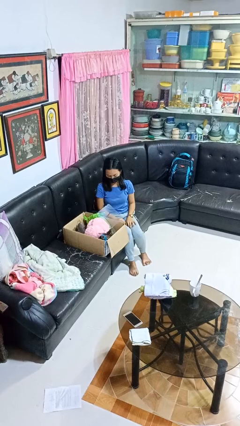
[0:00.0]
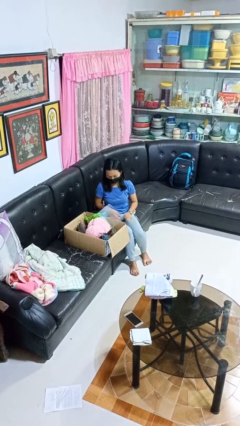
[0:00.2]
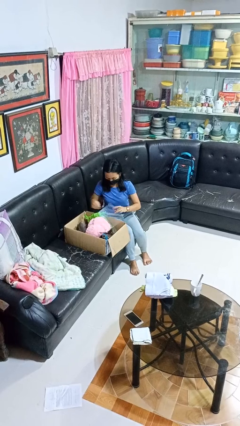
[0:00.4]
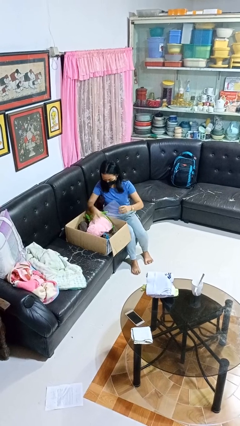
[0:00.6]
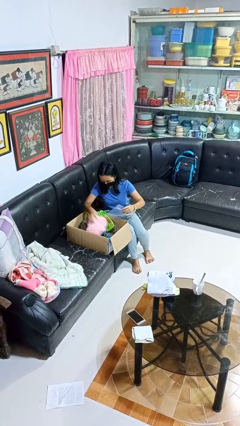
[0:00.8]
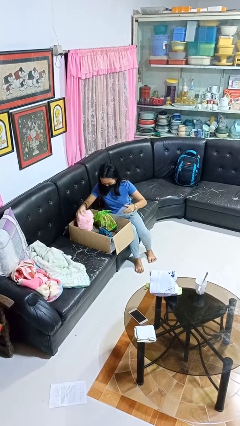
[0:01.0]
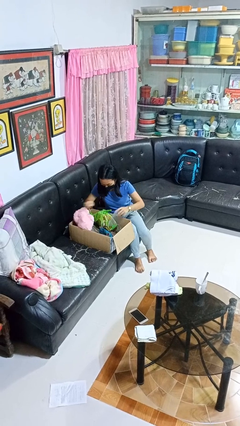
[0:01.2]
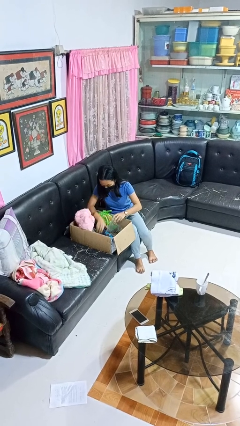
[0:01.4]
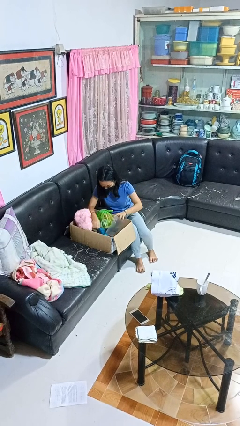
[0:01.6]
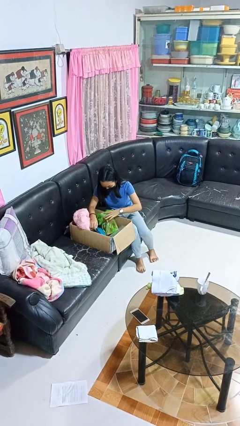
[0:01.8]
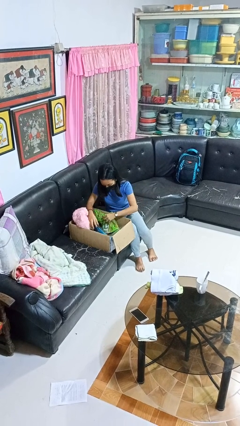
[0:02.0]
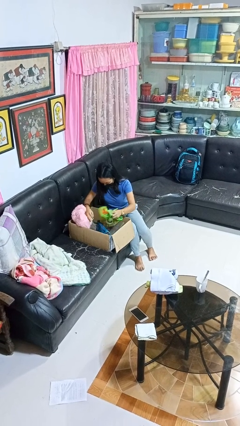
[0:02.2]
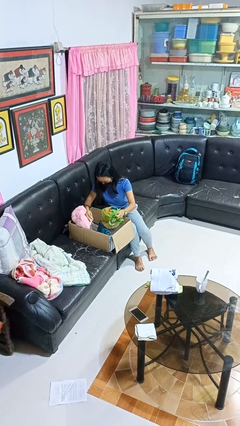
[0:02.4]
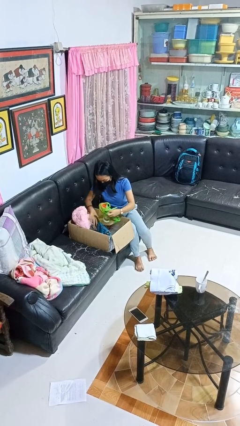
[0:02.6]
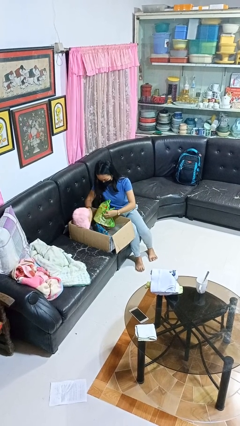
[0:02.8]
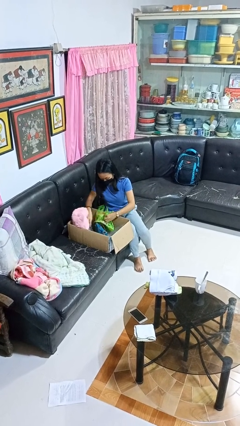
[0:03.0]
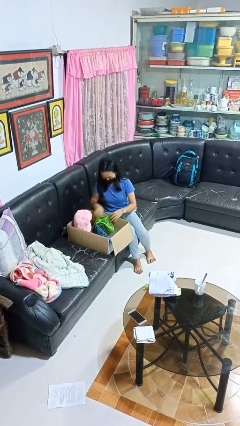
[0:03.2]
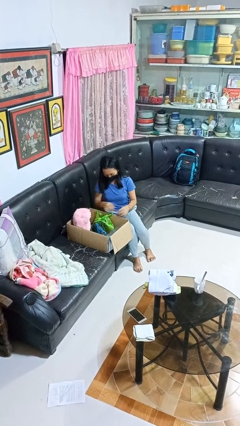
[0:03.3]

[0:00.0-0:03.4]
person searches in box

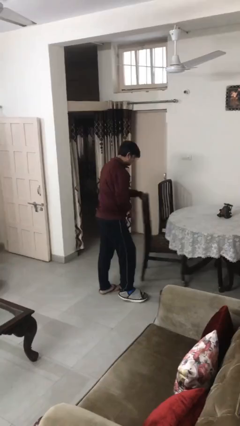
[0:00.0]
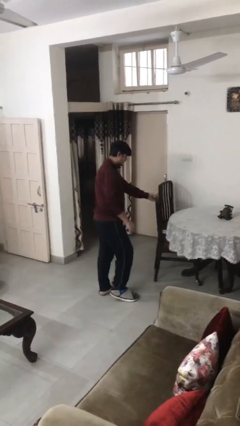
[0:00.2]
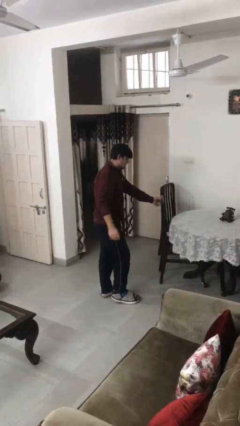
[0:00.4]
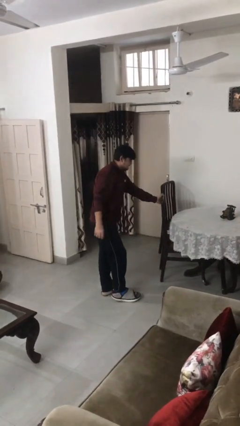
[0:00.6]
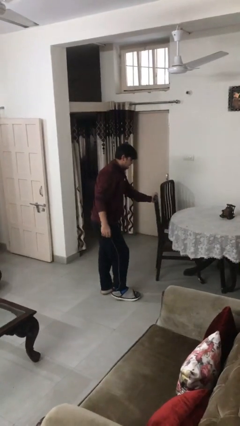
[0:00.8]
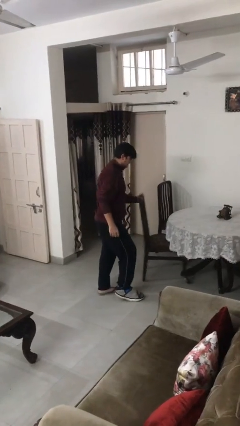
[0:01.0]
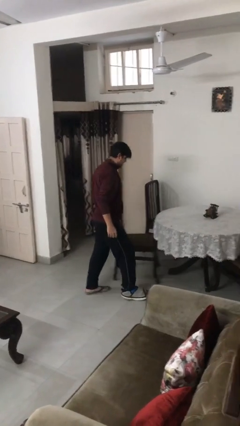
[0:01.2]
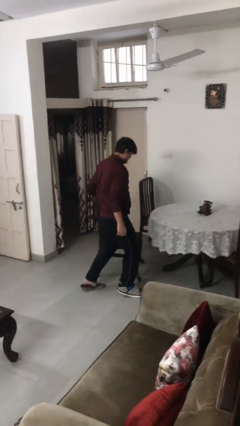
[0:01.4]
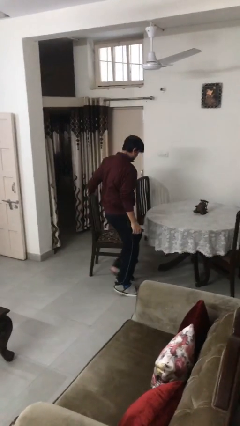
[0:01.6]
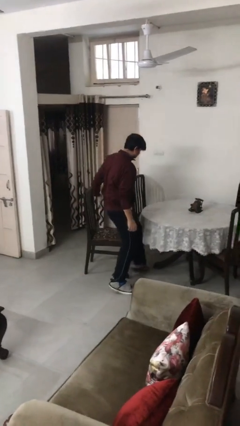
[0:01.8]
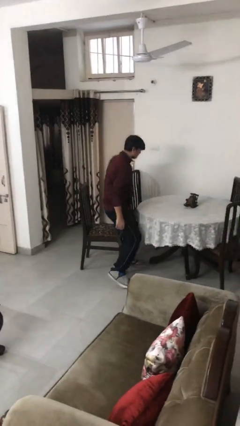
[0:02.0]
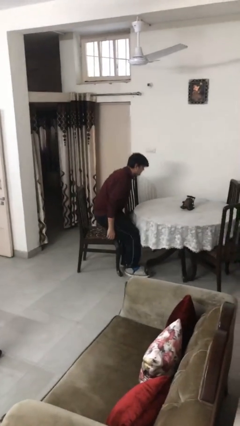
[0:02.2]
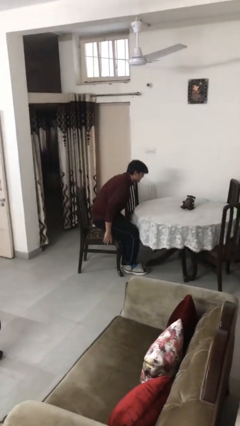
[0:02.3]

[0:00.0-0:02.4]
person sits down

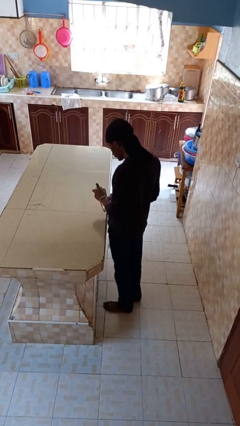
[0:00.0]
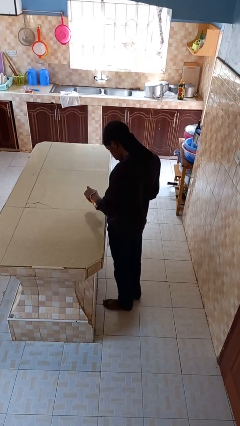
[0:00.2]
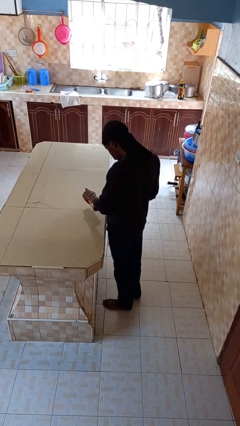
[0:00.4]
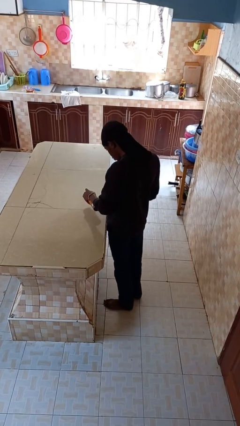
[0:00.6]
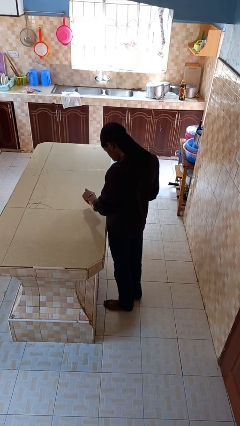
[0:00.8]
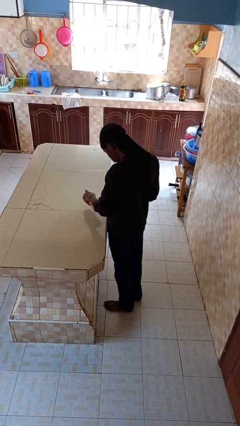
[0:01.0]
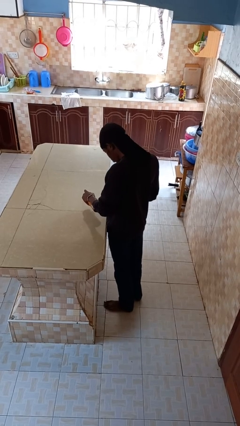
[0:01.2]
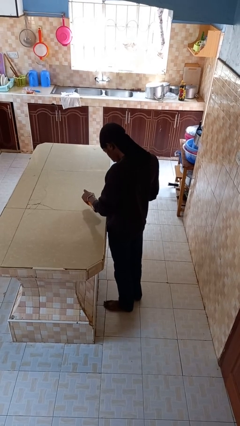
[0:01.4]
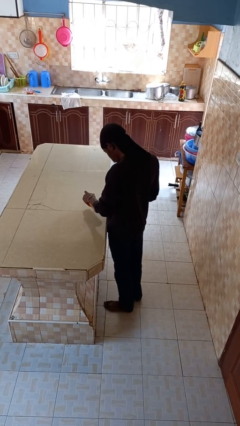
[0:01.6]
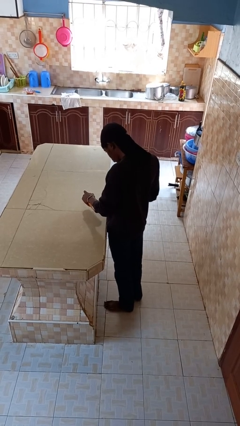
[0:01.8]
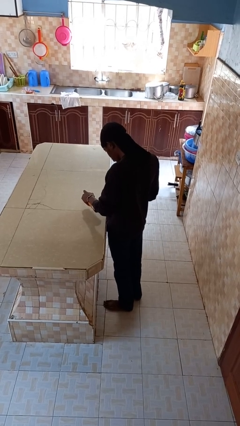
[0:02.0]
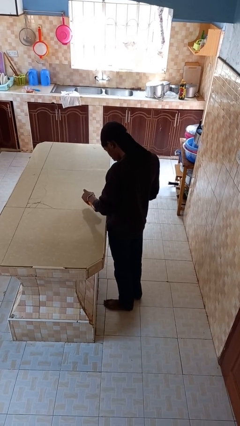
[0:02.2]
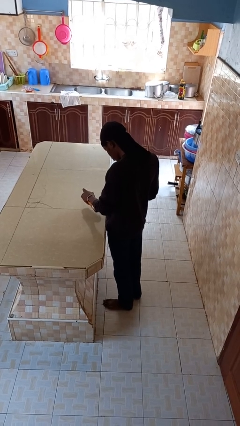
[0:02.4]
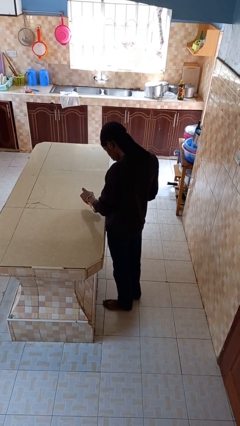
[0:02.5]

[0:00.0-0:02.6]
person sprays from bottle

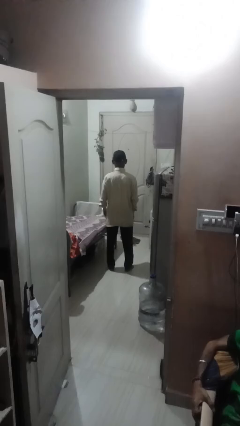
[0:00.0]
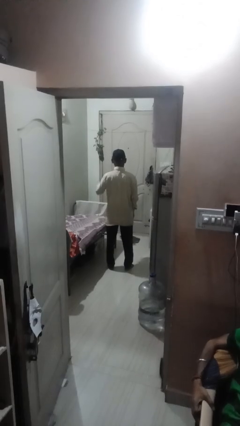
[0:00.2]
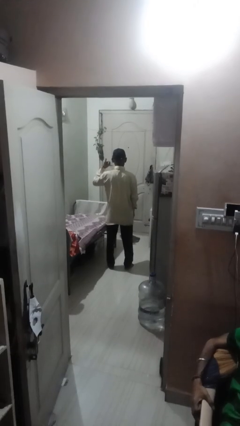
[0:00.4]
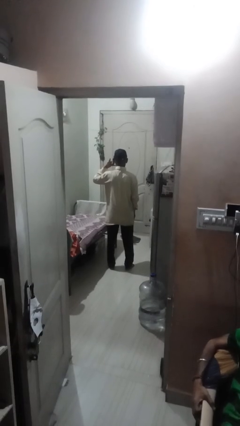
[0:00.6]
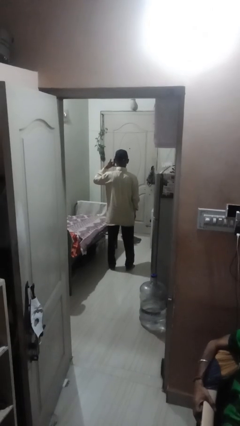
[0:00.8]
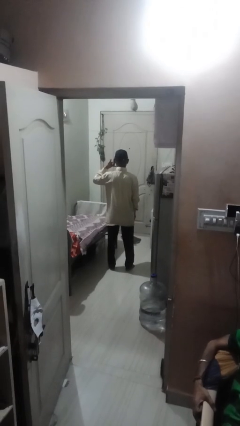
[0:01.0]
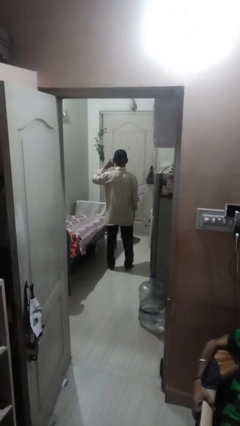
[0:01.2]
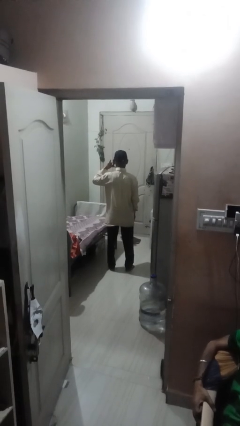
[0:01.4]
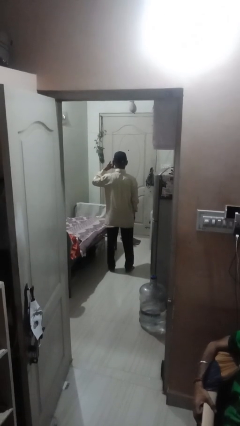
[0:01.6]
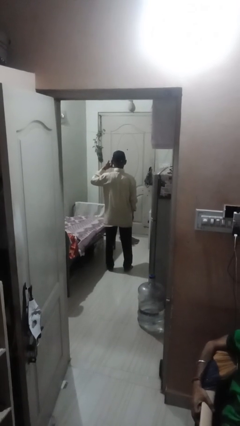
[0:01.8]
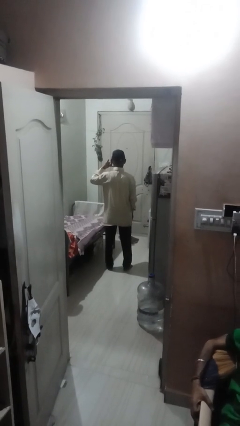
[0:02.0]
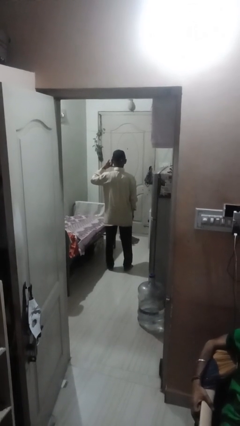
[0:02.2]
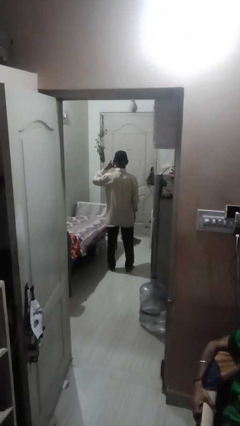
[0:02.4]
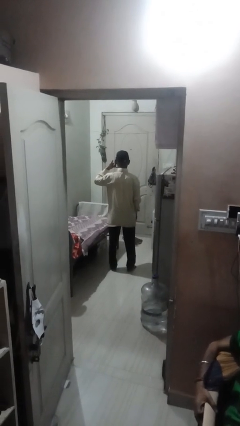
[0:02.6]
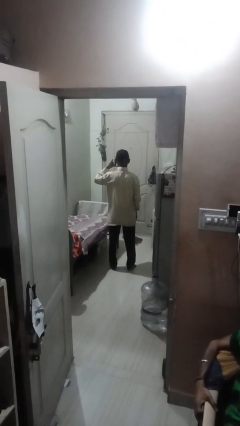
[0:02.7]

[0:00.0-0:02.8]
person gestures call me

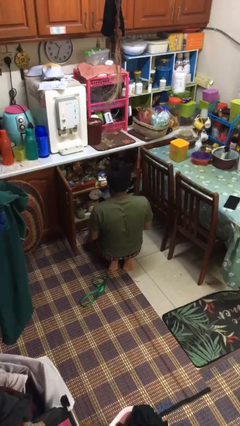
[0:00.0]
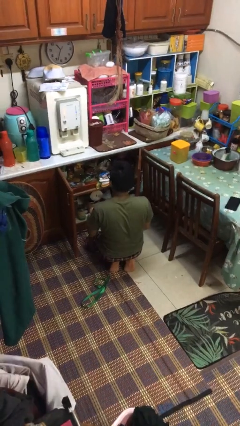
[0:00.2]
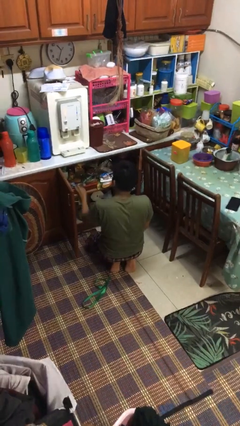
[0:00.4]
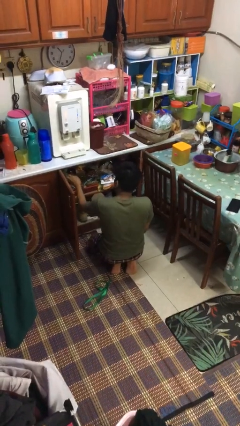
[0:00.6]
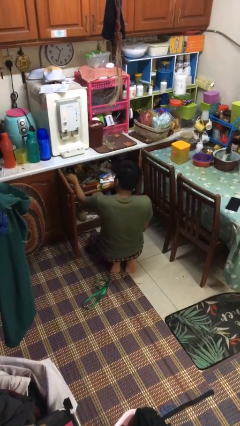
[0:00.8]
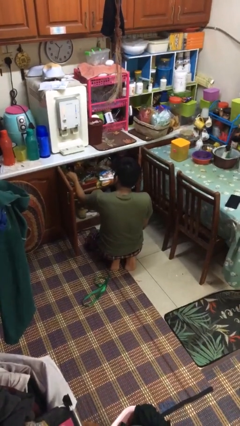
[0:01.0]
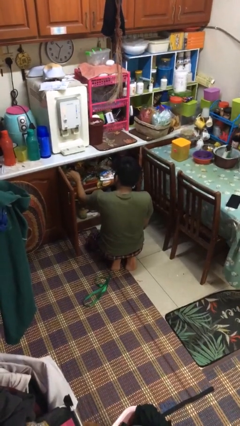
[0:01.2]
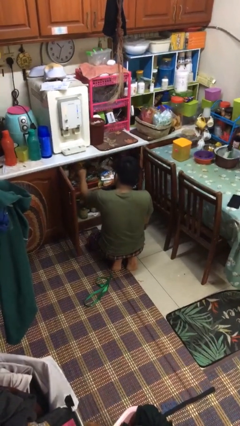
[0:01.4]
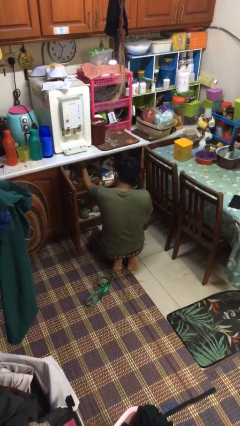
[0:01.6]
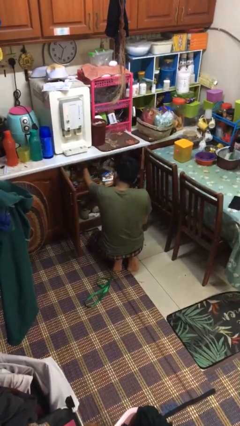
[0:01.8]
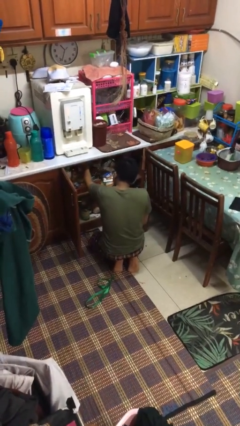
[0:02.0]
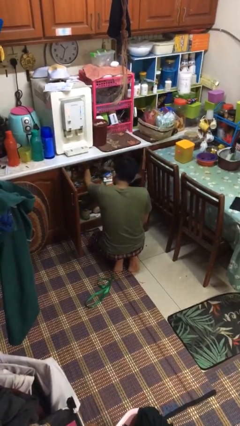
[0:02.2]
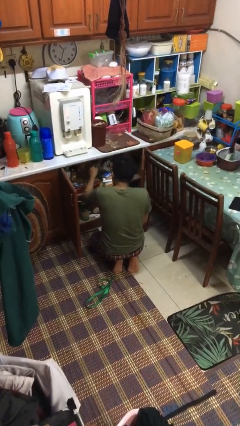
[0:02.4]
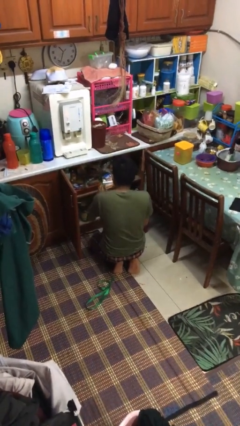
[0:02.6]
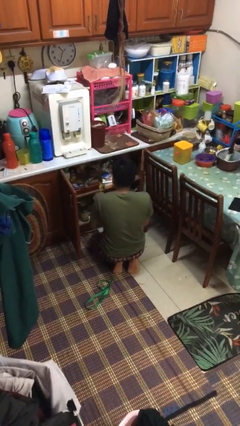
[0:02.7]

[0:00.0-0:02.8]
person searches in kitchen drawer

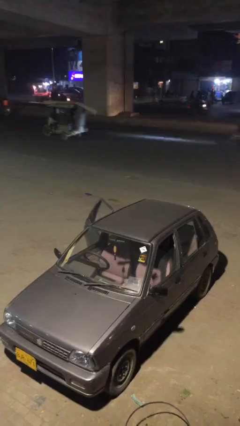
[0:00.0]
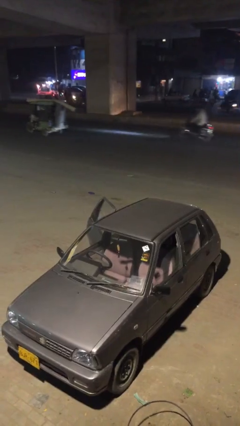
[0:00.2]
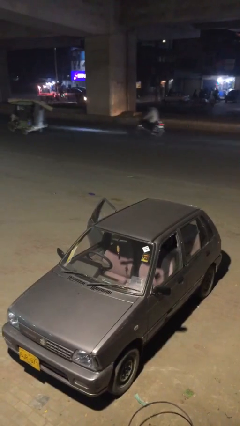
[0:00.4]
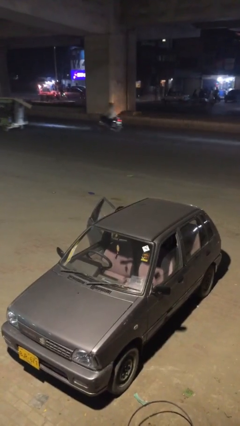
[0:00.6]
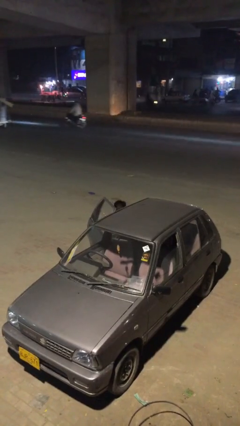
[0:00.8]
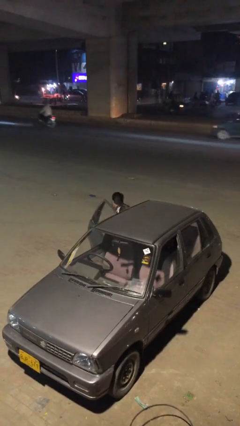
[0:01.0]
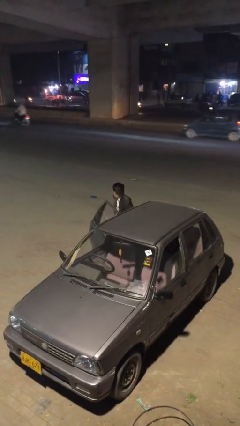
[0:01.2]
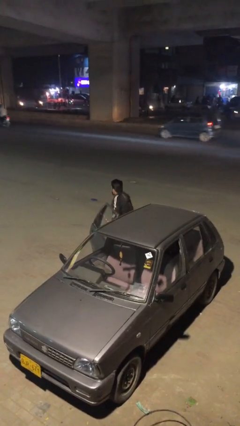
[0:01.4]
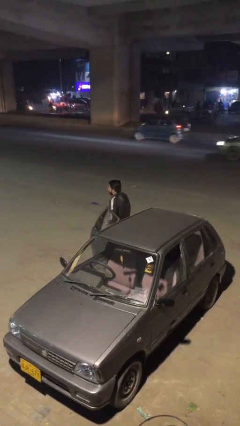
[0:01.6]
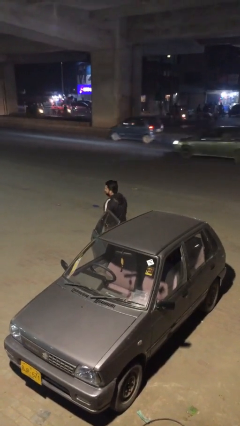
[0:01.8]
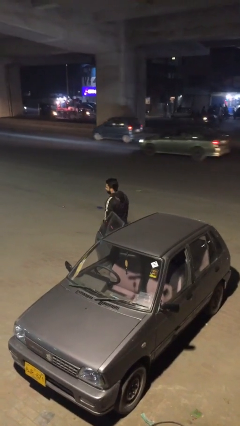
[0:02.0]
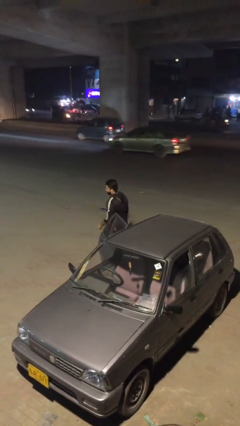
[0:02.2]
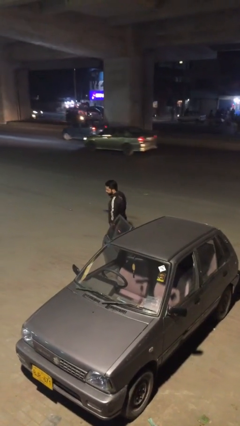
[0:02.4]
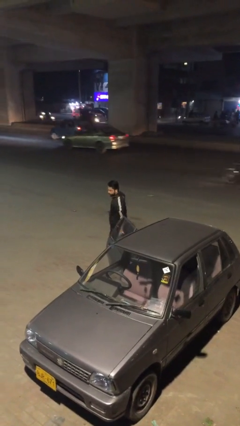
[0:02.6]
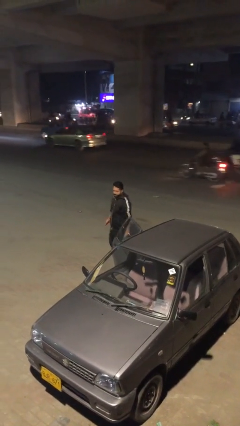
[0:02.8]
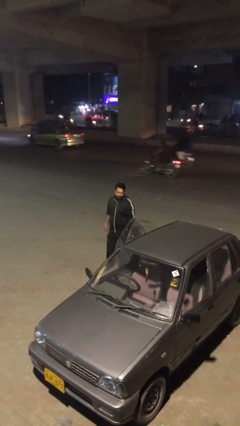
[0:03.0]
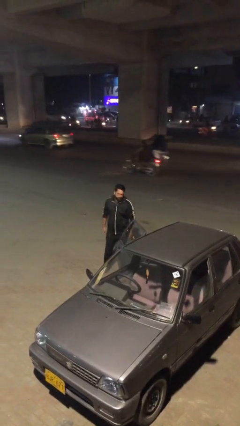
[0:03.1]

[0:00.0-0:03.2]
person exits car
